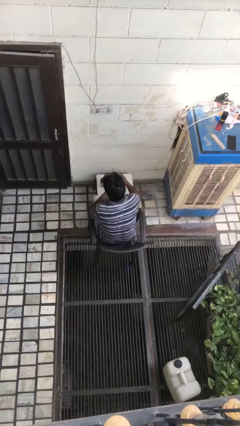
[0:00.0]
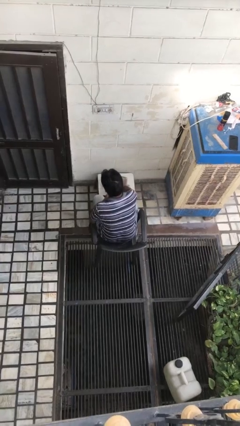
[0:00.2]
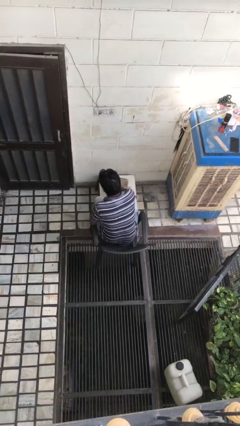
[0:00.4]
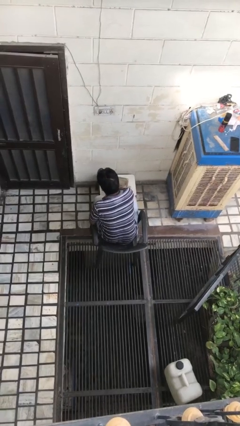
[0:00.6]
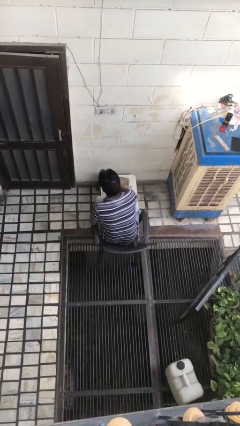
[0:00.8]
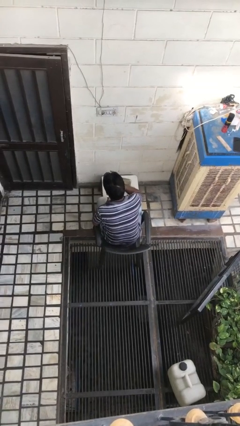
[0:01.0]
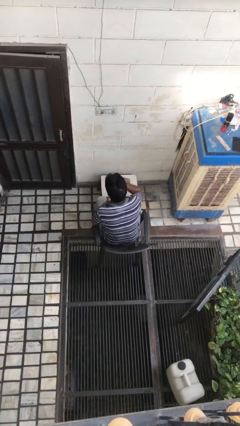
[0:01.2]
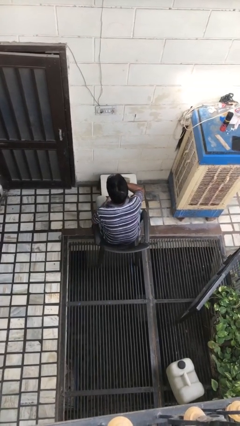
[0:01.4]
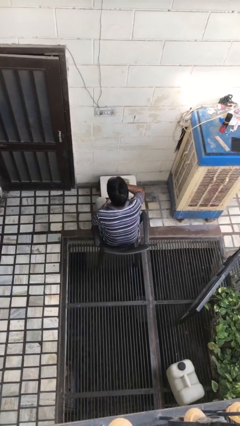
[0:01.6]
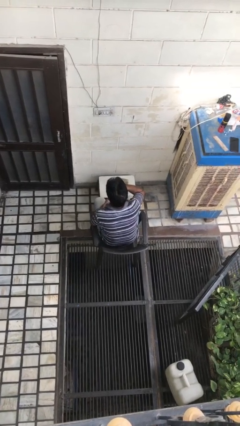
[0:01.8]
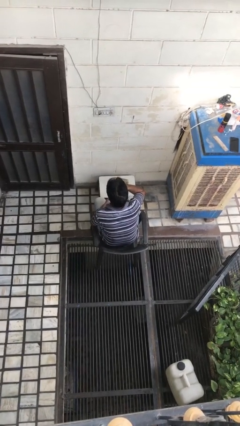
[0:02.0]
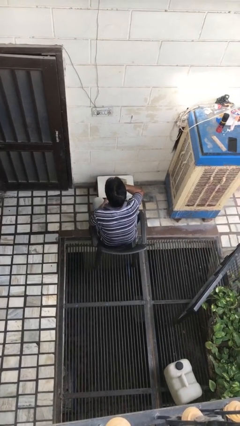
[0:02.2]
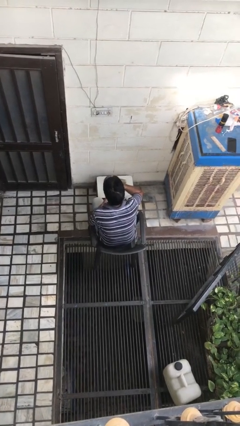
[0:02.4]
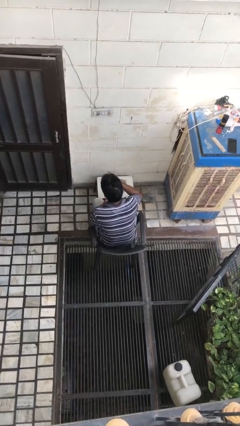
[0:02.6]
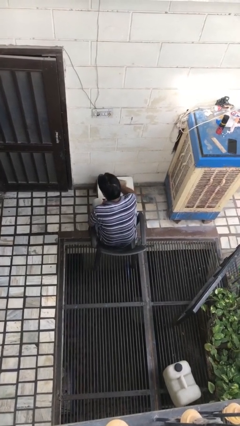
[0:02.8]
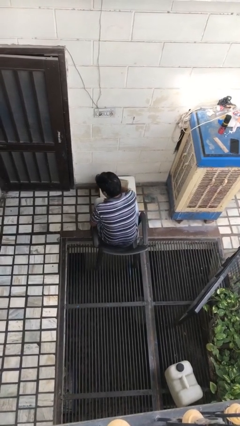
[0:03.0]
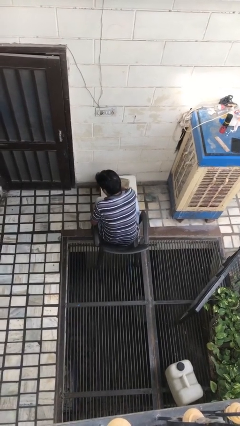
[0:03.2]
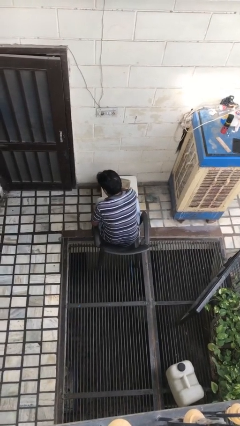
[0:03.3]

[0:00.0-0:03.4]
person drinks from cup

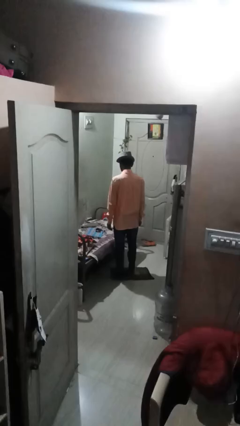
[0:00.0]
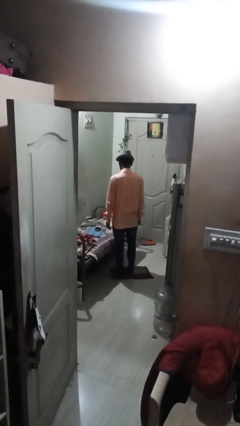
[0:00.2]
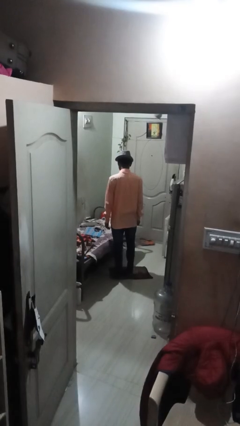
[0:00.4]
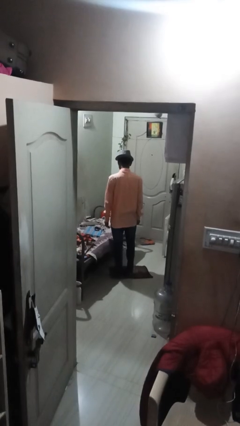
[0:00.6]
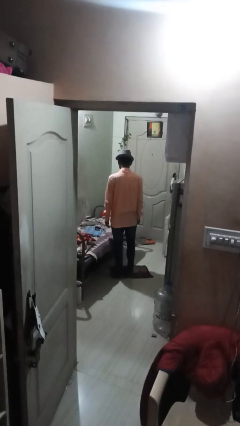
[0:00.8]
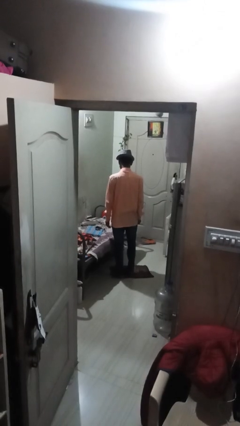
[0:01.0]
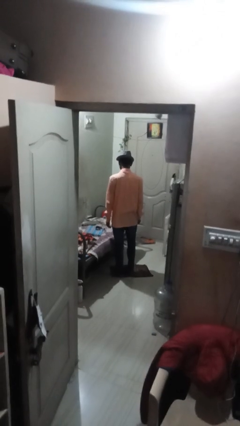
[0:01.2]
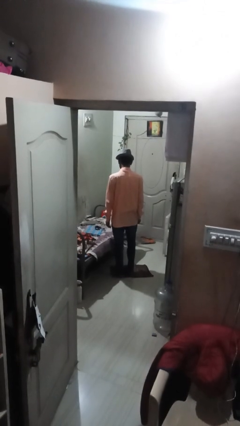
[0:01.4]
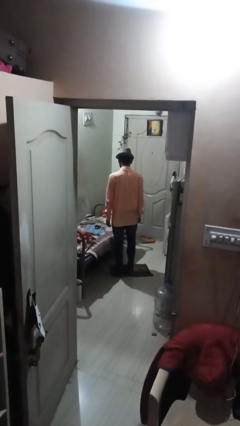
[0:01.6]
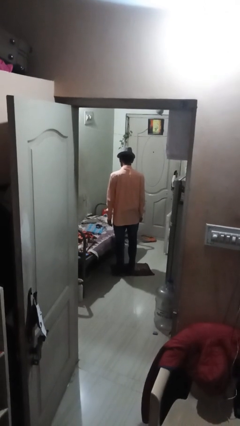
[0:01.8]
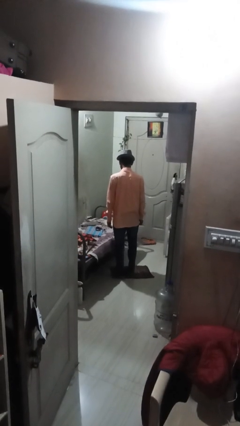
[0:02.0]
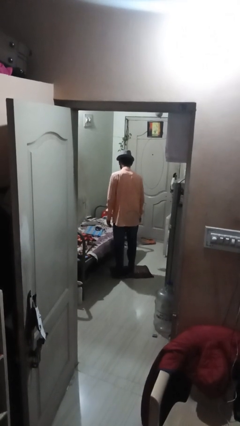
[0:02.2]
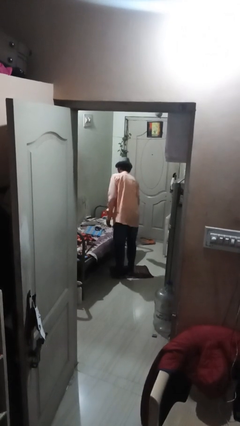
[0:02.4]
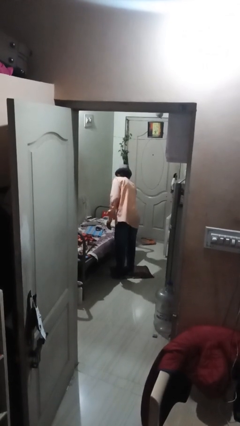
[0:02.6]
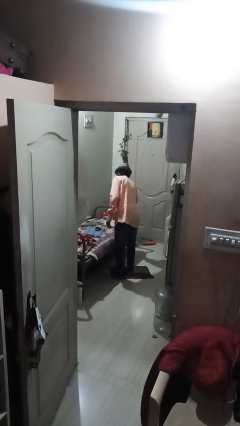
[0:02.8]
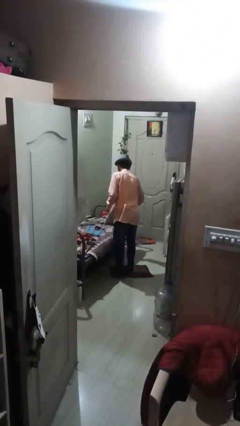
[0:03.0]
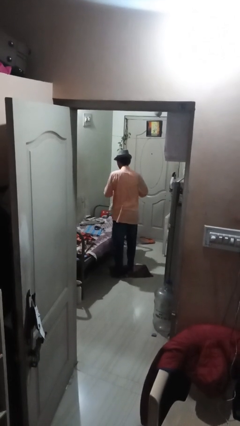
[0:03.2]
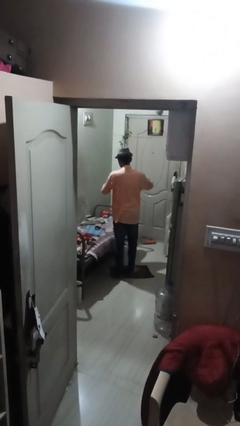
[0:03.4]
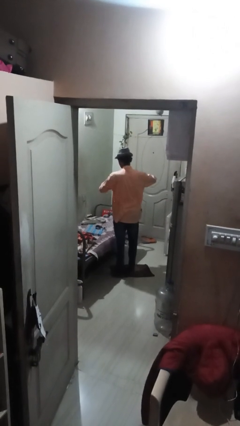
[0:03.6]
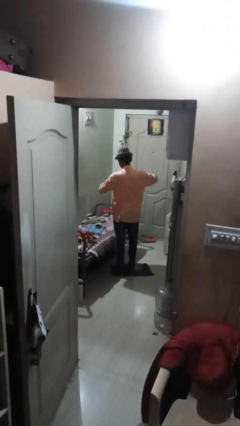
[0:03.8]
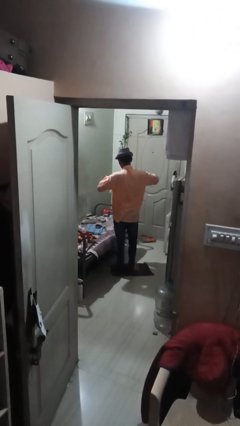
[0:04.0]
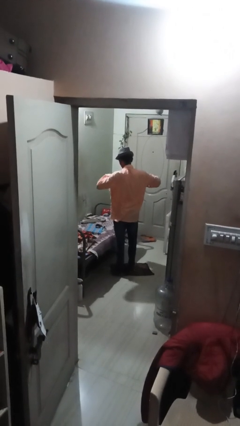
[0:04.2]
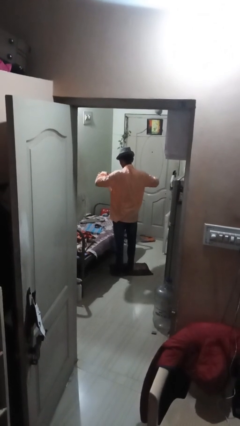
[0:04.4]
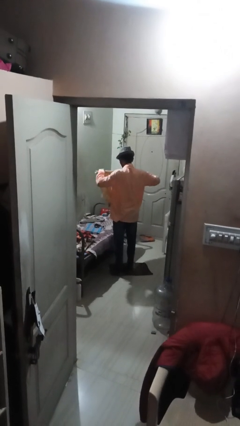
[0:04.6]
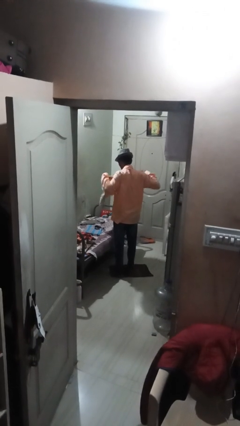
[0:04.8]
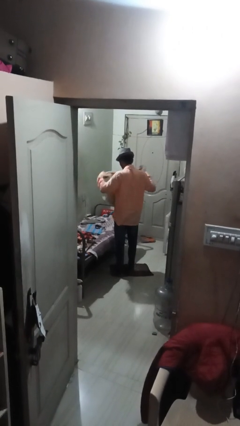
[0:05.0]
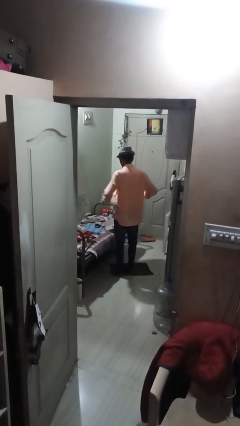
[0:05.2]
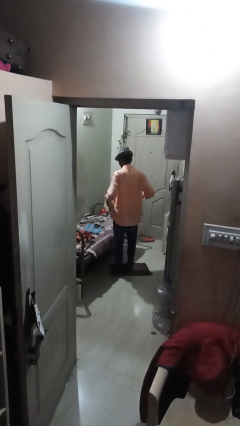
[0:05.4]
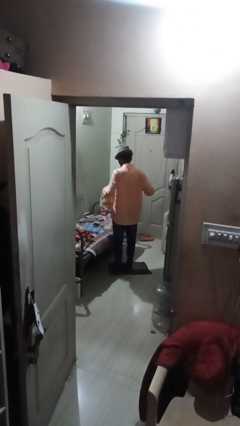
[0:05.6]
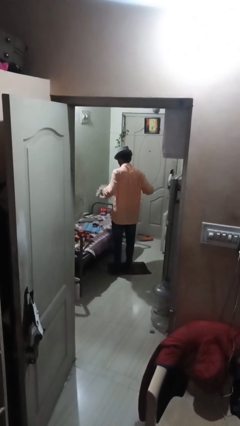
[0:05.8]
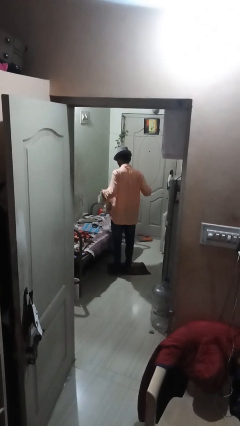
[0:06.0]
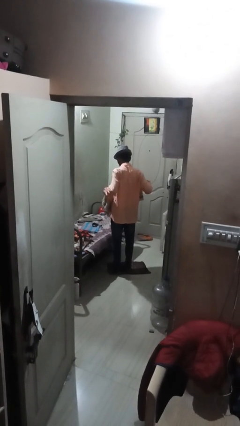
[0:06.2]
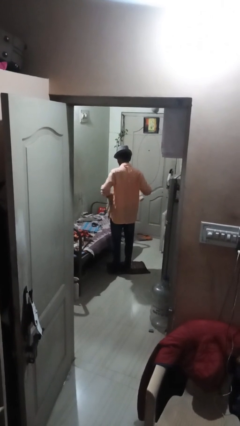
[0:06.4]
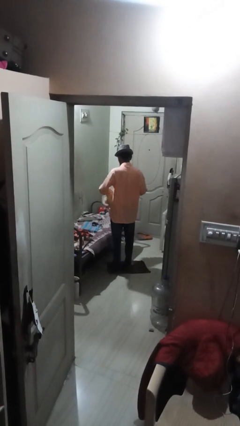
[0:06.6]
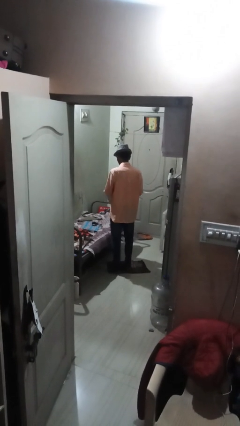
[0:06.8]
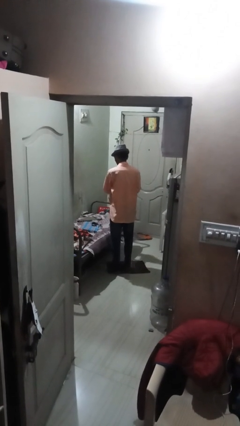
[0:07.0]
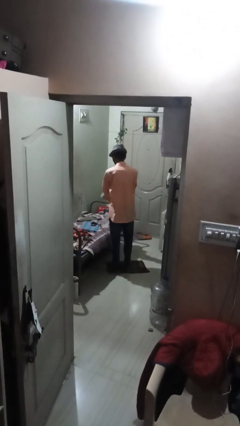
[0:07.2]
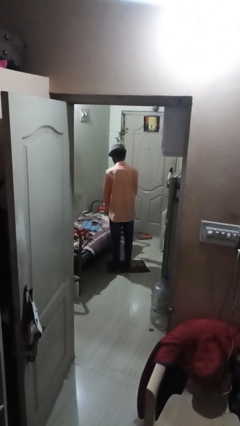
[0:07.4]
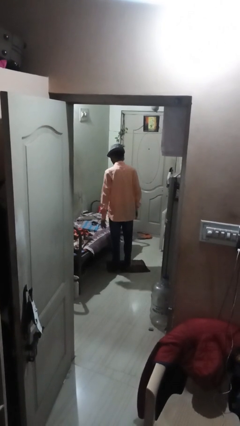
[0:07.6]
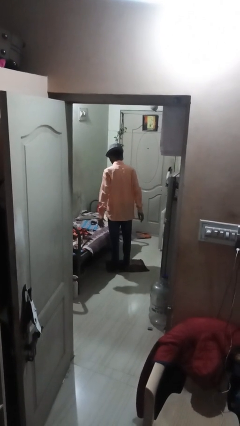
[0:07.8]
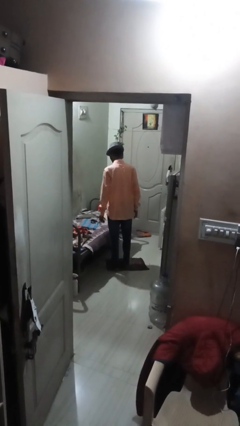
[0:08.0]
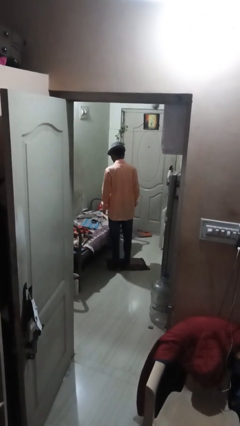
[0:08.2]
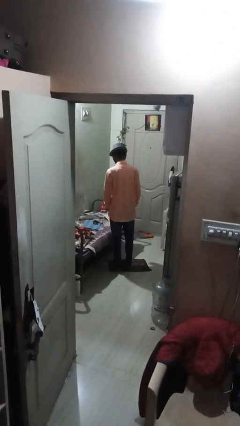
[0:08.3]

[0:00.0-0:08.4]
person folds towel

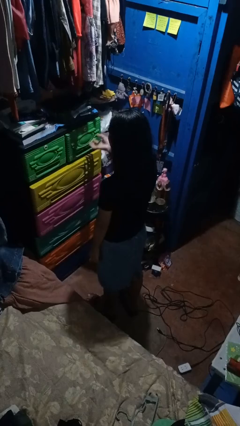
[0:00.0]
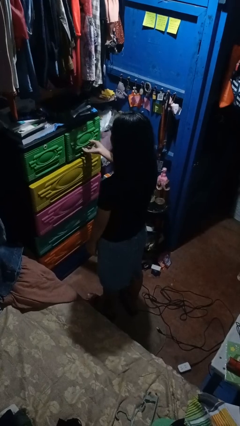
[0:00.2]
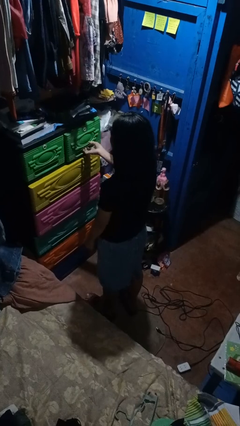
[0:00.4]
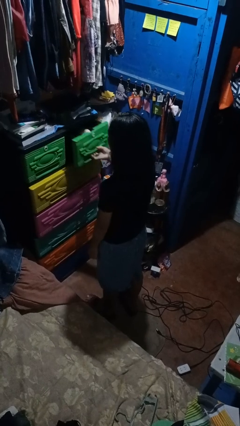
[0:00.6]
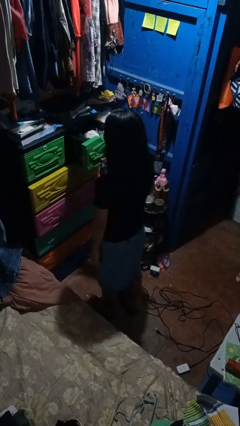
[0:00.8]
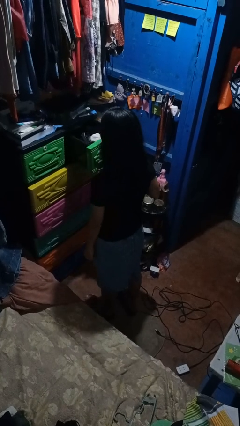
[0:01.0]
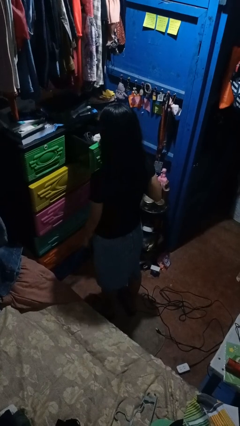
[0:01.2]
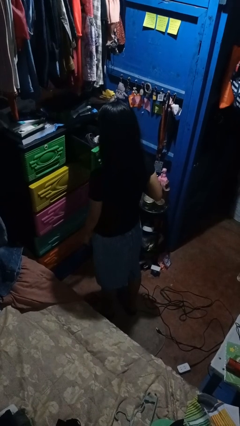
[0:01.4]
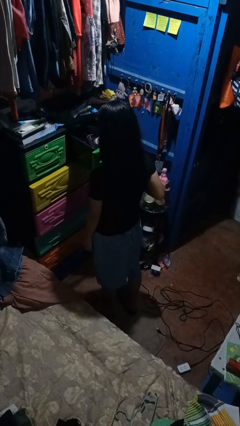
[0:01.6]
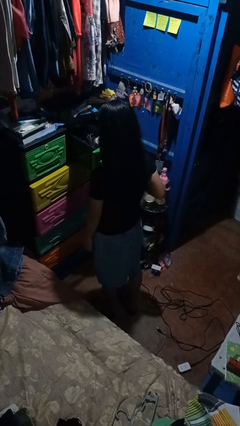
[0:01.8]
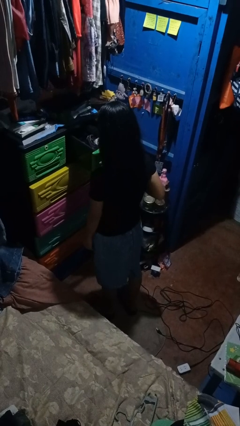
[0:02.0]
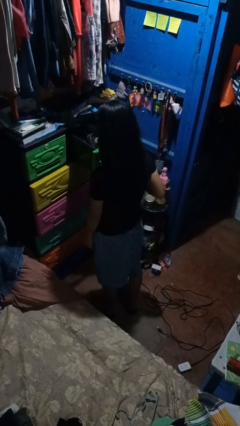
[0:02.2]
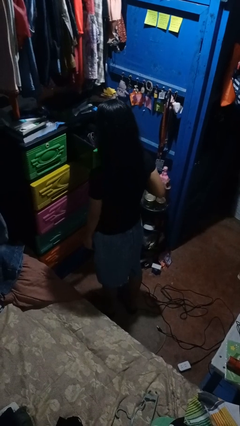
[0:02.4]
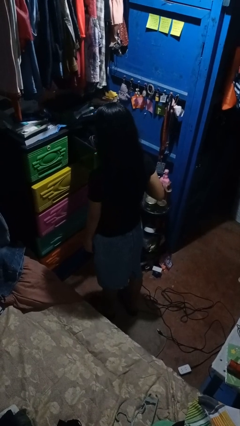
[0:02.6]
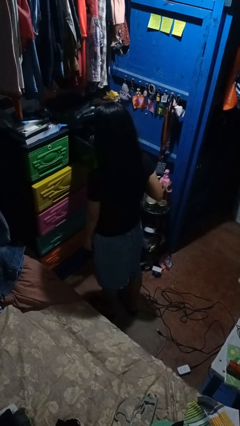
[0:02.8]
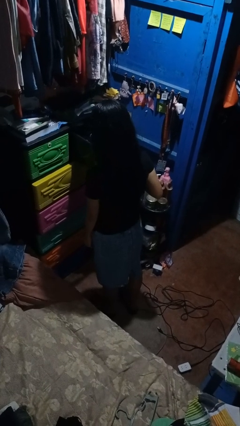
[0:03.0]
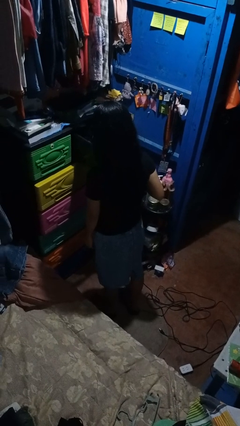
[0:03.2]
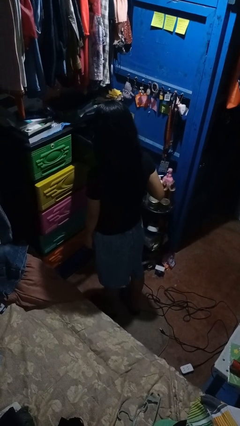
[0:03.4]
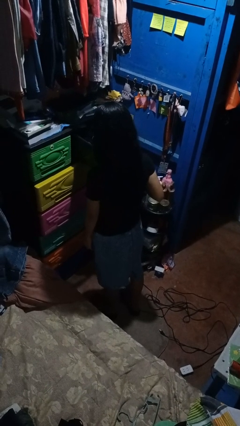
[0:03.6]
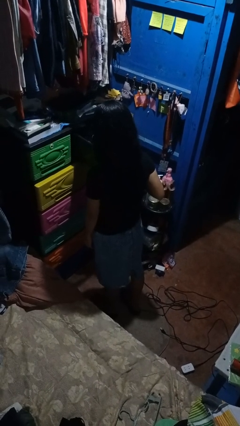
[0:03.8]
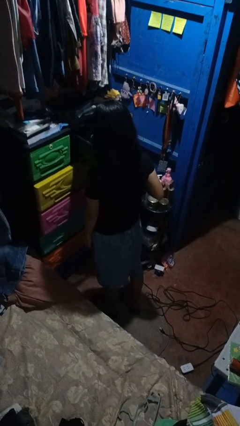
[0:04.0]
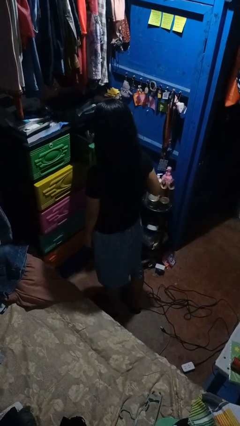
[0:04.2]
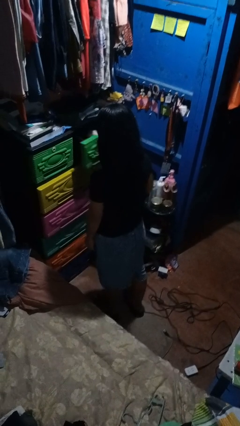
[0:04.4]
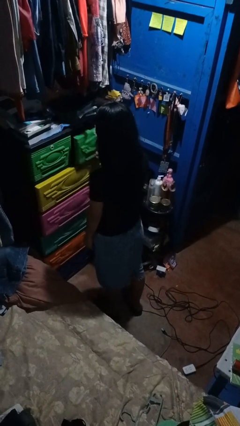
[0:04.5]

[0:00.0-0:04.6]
person opens dresser drawer

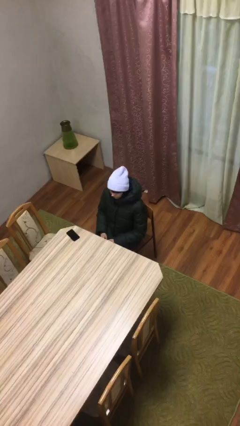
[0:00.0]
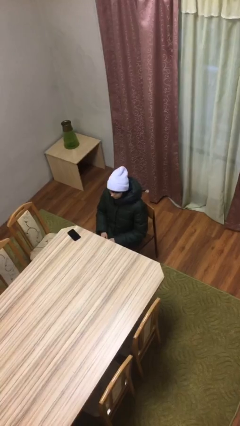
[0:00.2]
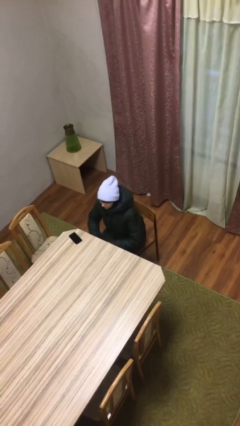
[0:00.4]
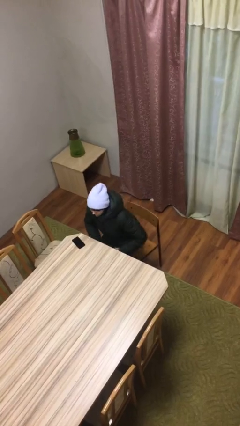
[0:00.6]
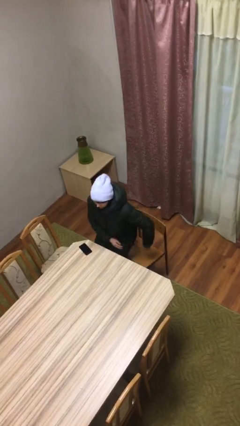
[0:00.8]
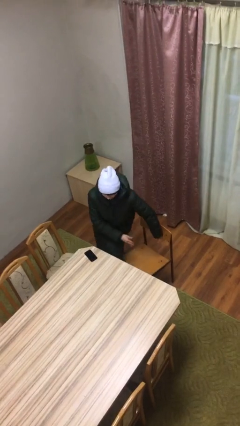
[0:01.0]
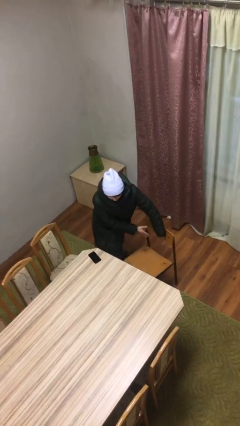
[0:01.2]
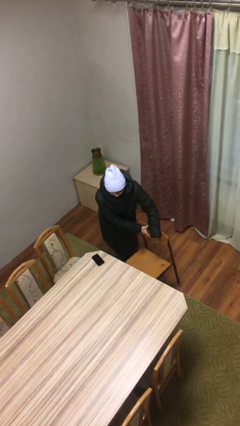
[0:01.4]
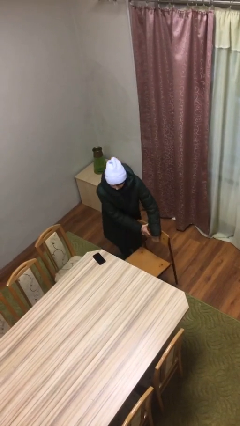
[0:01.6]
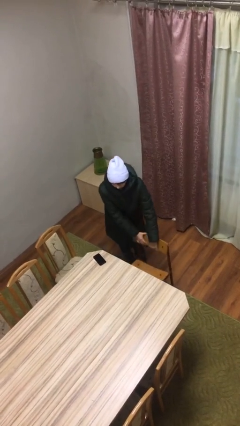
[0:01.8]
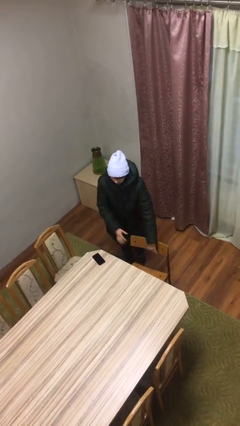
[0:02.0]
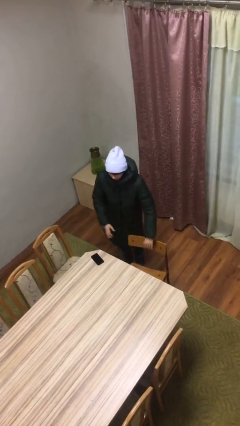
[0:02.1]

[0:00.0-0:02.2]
person stands up
